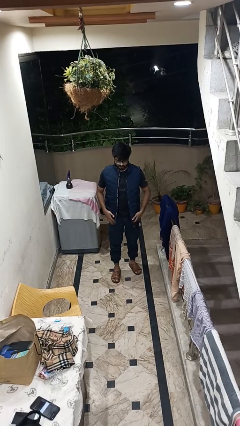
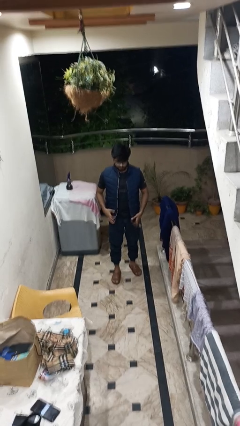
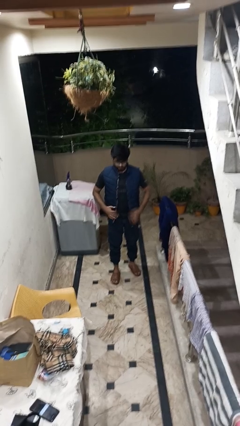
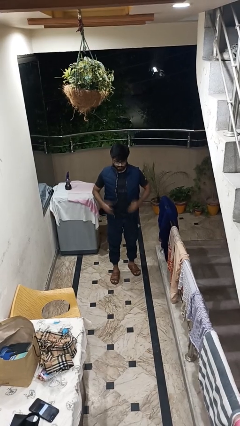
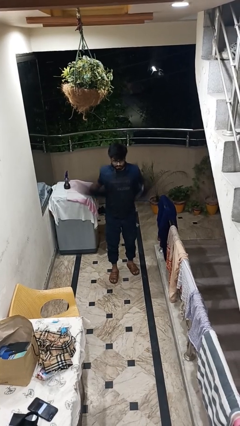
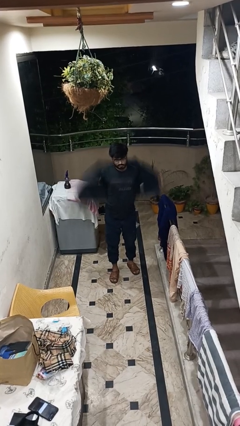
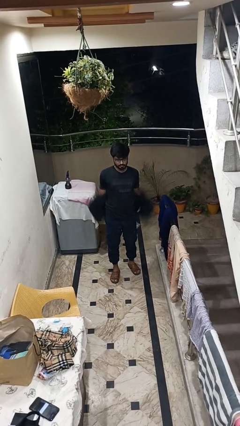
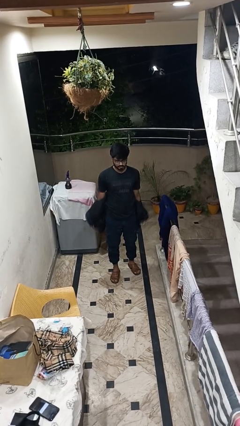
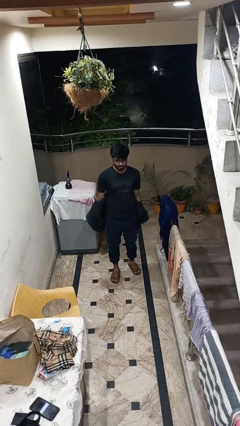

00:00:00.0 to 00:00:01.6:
person takes off jacket

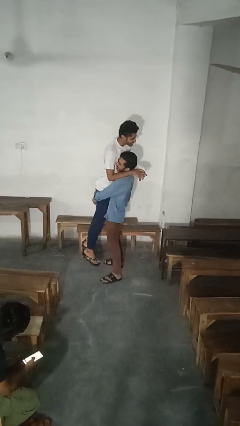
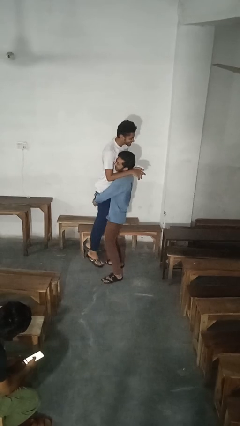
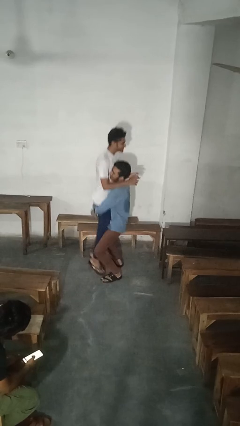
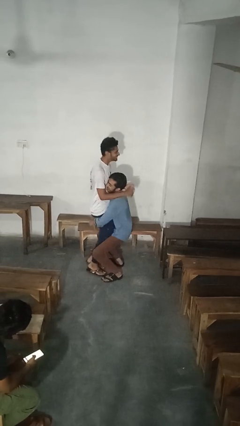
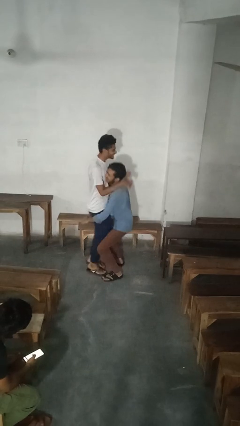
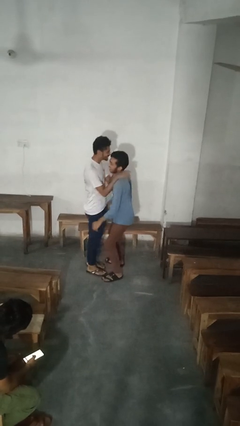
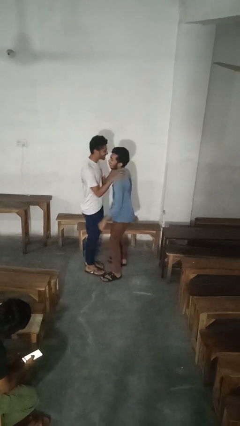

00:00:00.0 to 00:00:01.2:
person puts down person

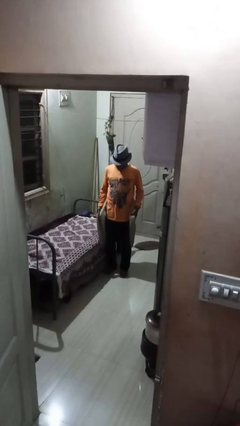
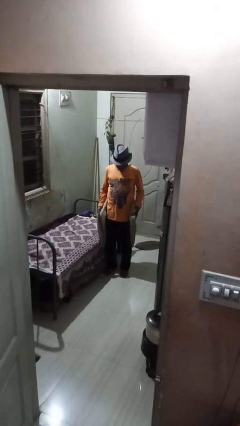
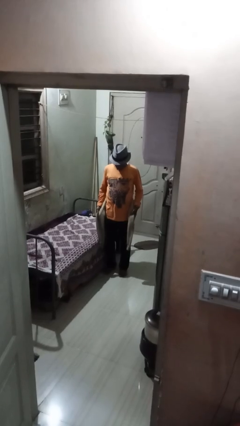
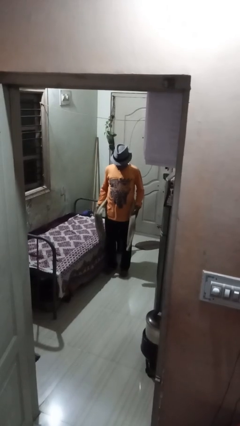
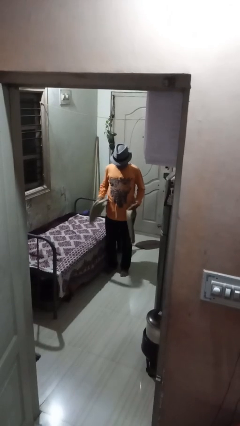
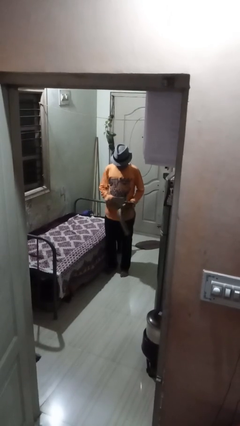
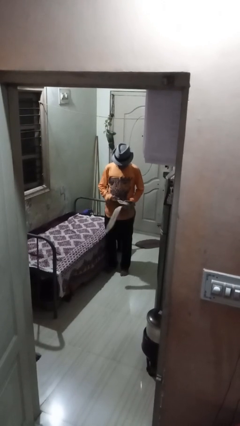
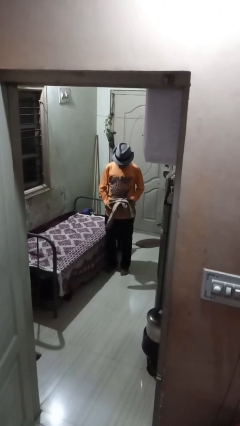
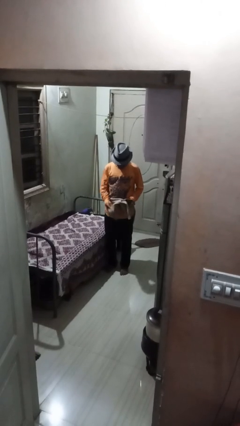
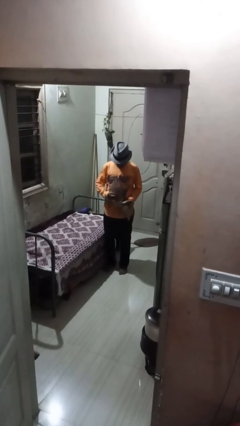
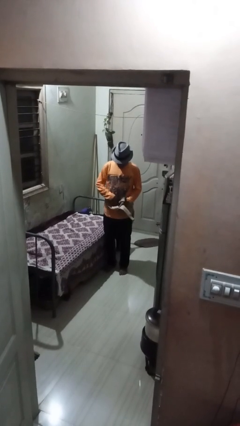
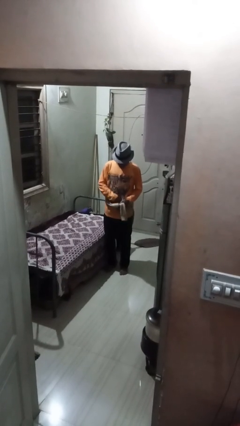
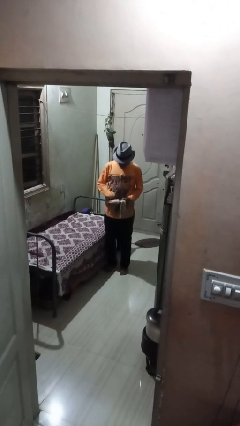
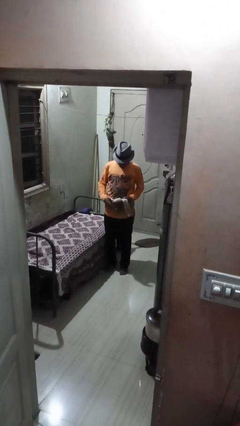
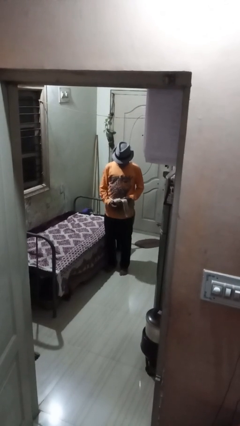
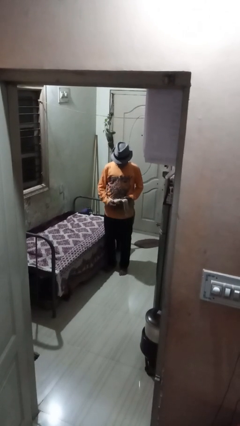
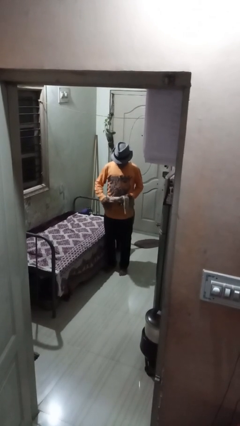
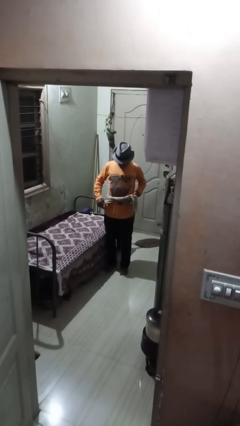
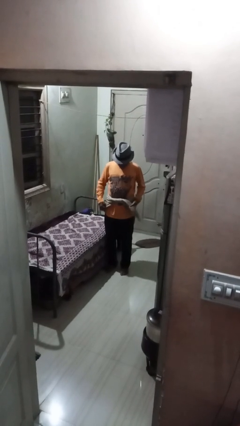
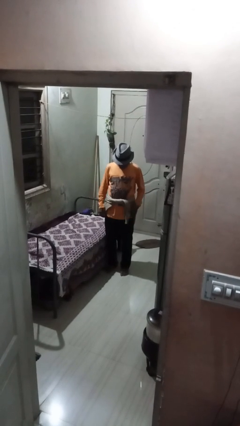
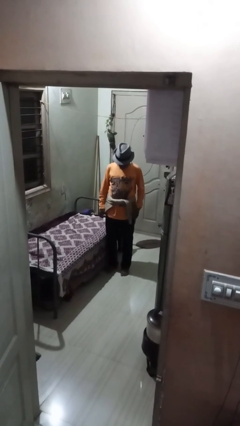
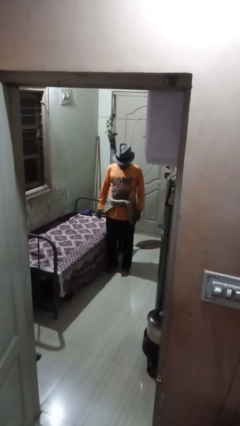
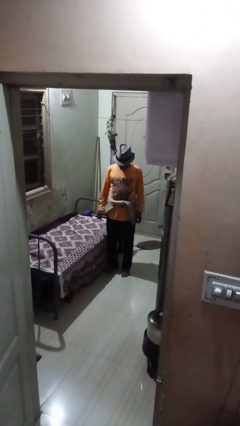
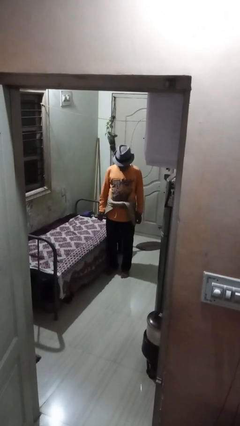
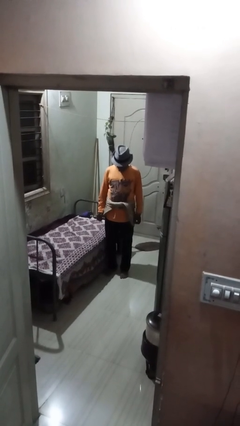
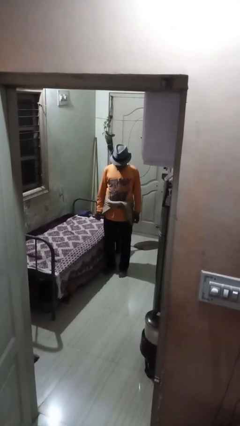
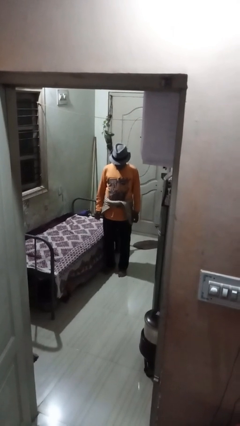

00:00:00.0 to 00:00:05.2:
person ties jacket around waist

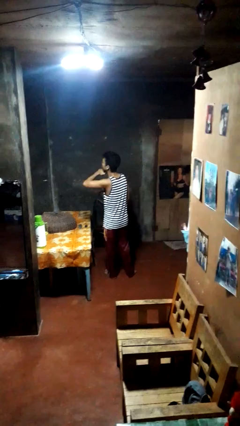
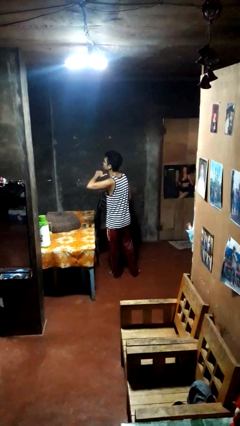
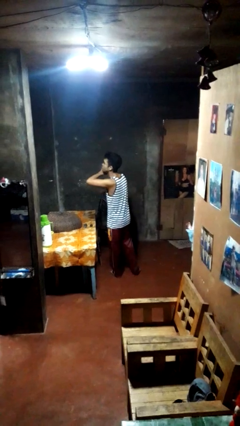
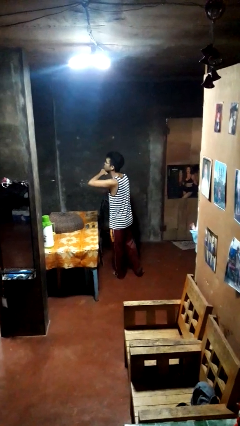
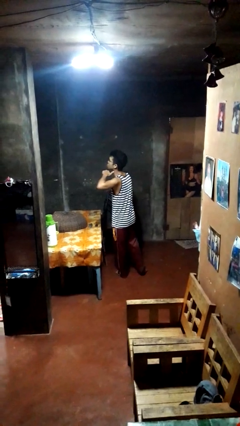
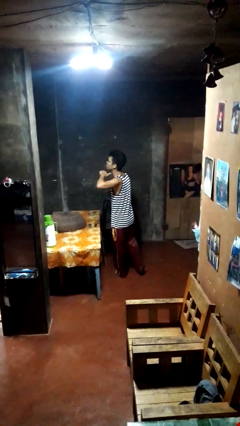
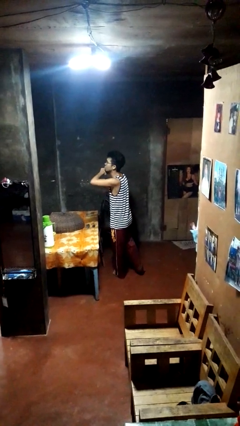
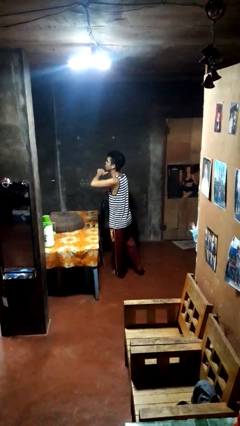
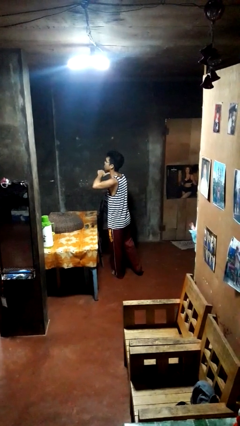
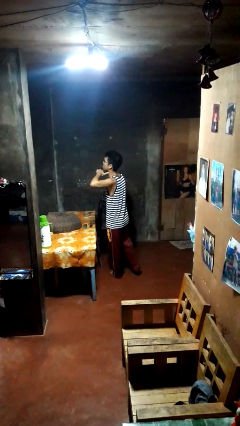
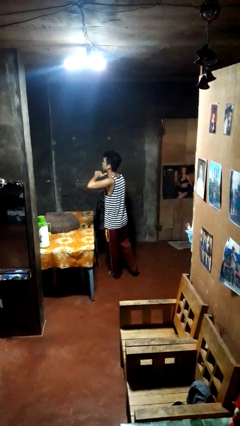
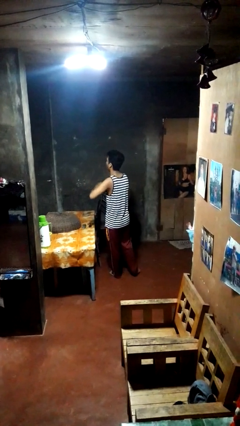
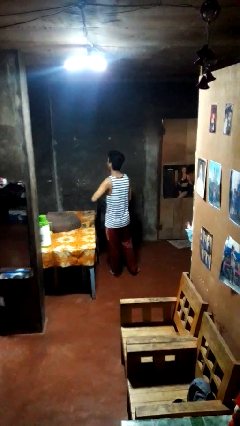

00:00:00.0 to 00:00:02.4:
person gestures cut

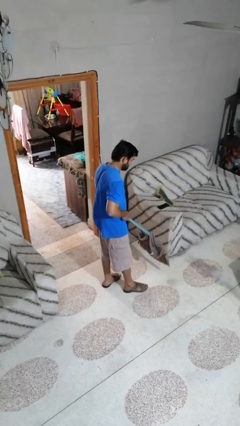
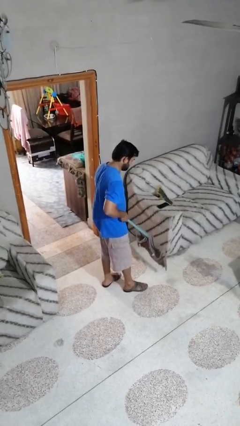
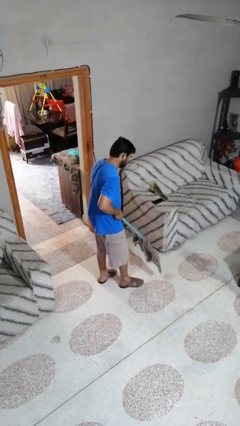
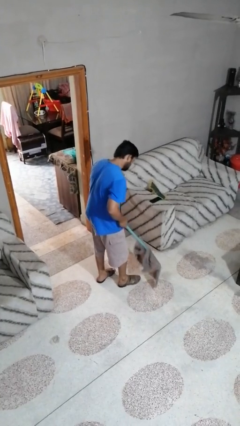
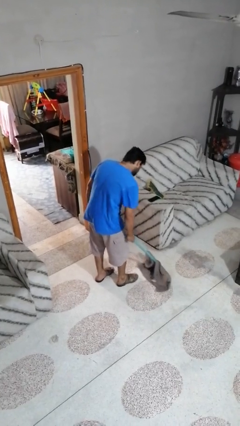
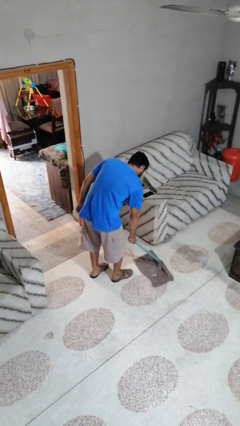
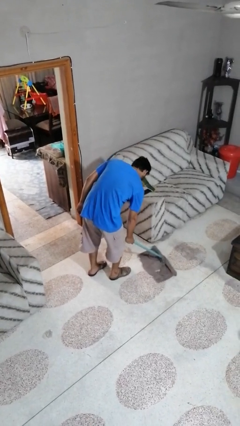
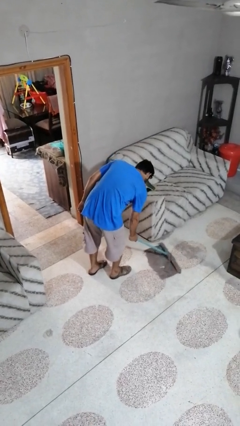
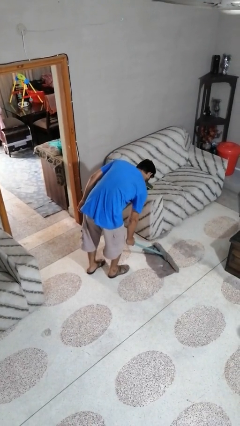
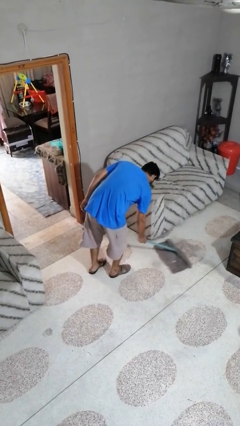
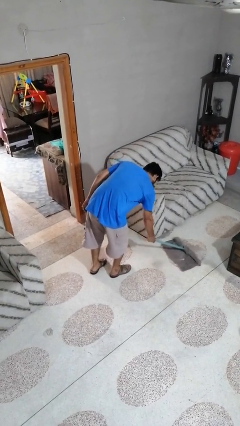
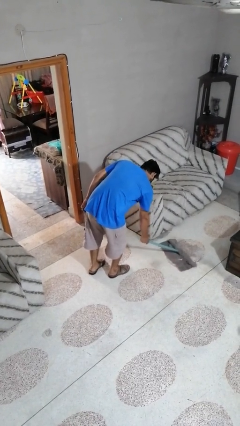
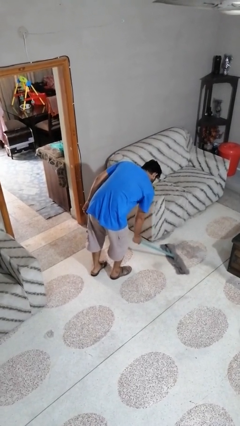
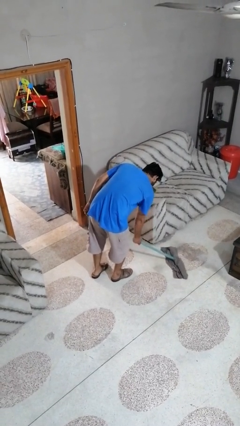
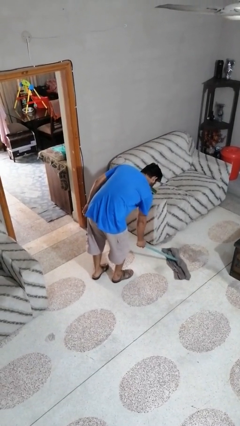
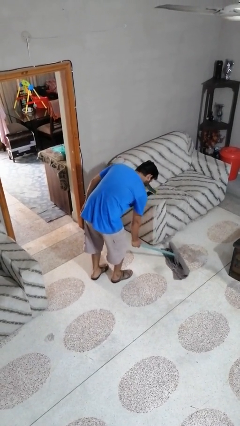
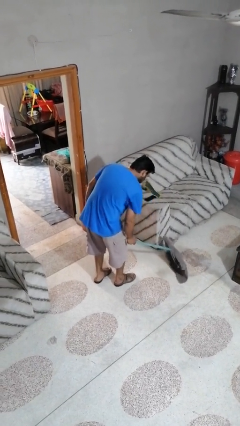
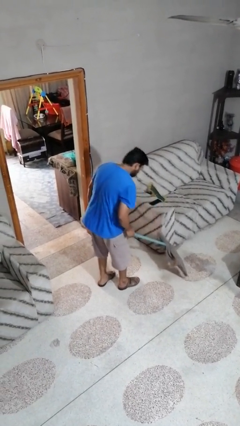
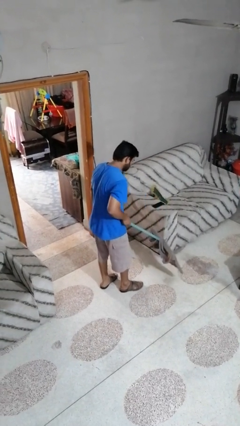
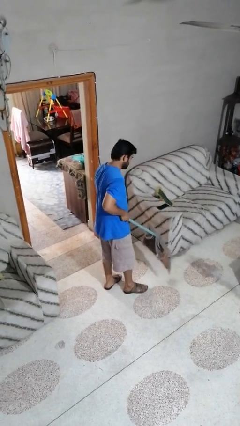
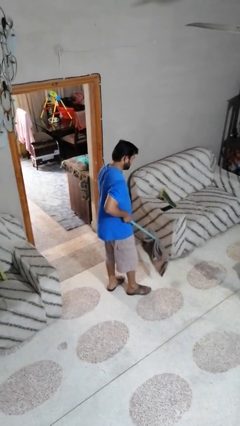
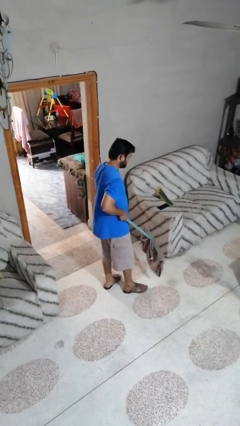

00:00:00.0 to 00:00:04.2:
person mops

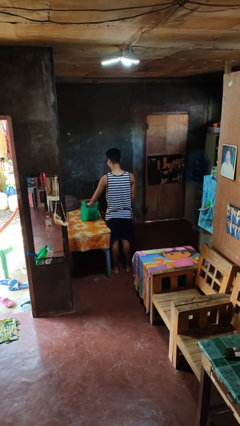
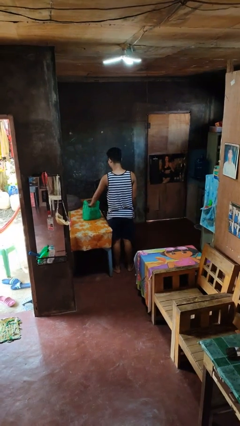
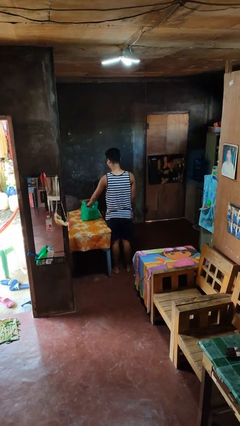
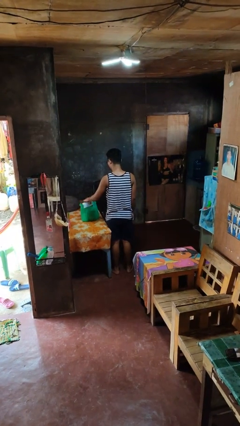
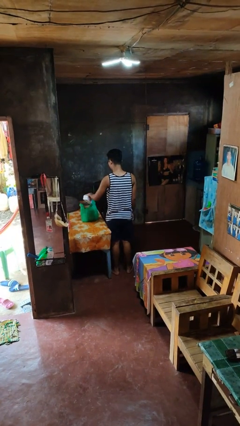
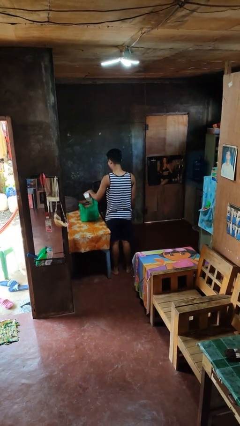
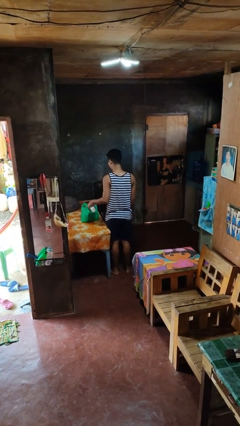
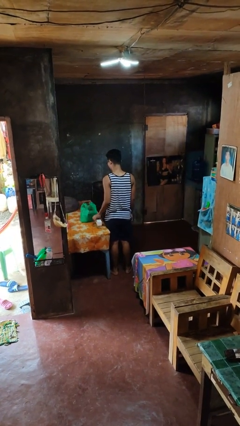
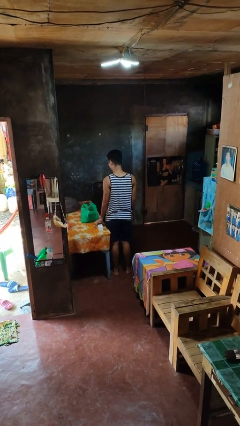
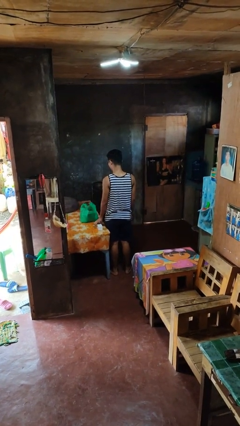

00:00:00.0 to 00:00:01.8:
person takes object from bag

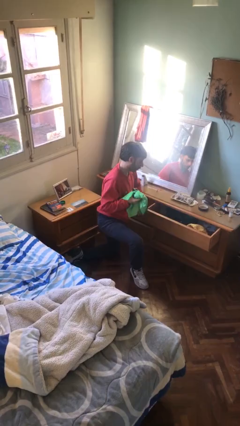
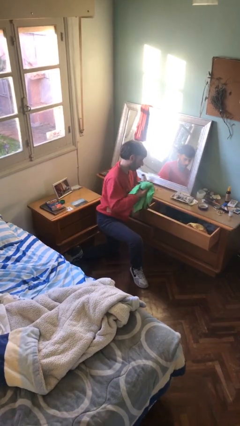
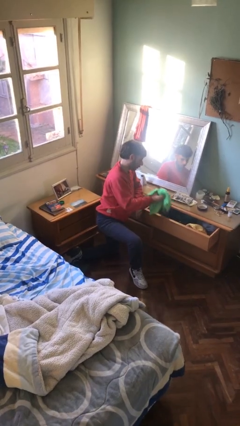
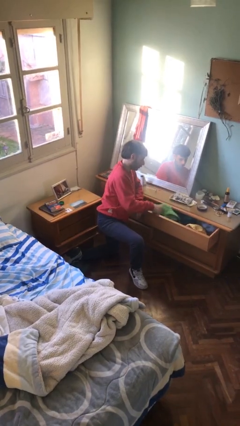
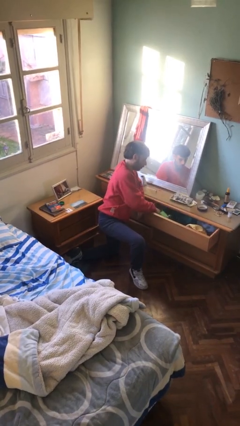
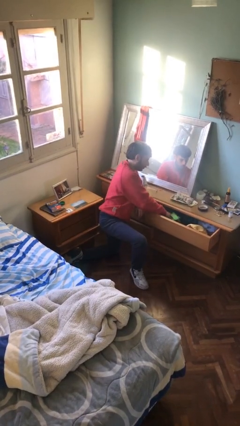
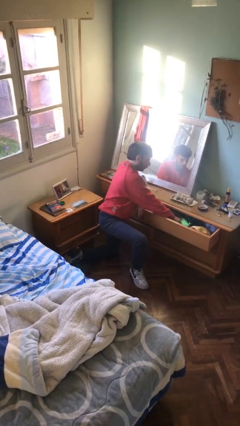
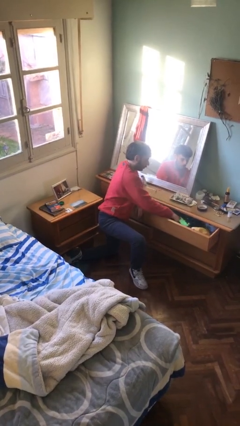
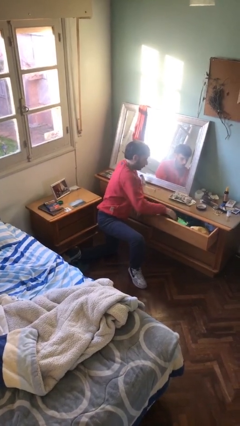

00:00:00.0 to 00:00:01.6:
person puts clothes into dresser
